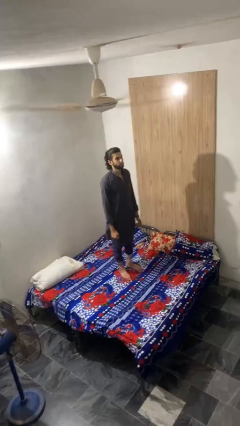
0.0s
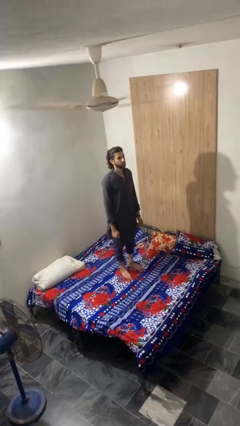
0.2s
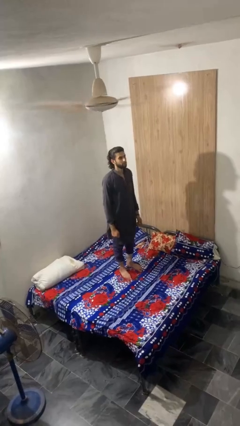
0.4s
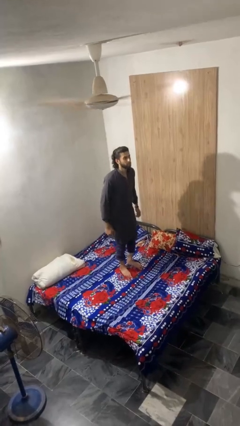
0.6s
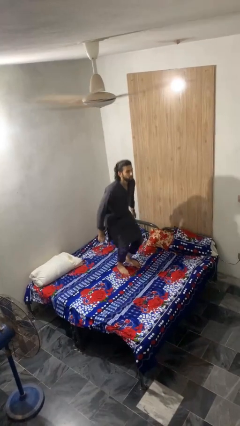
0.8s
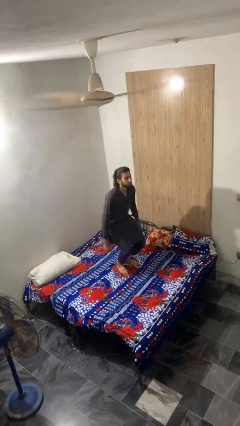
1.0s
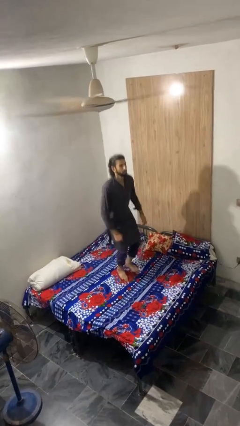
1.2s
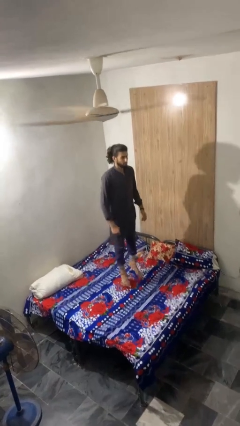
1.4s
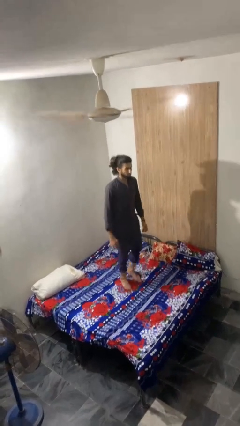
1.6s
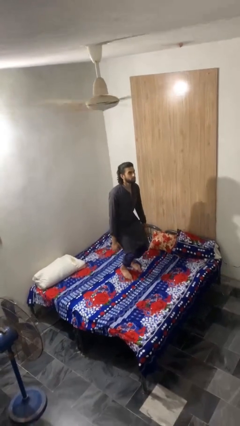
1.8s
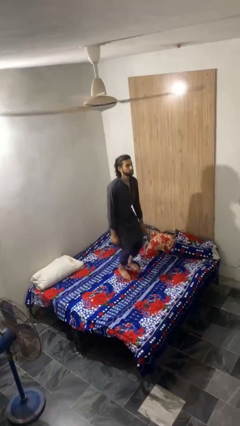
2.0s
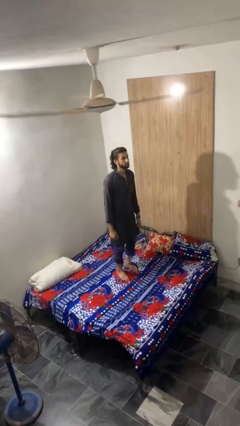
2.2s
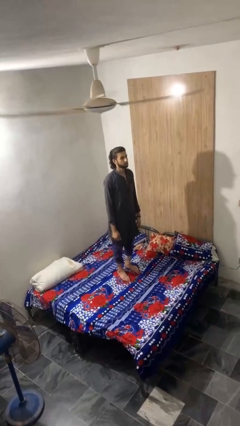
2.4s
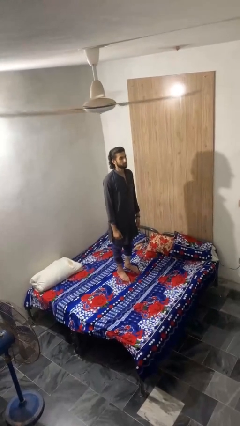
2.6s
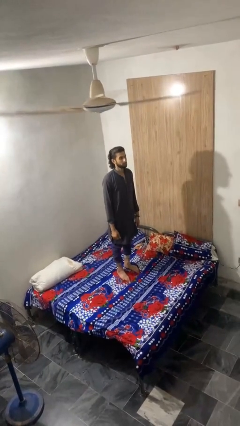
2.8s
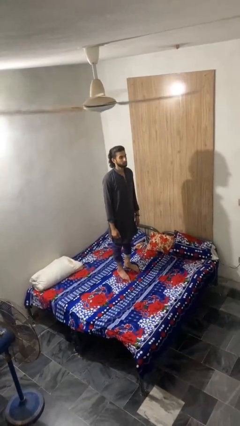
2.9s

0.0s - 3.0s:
person jumps on bed

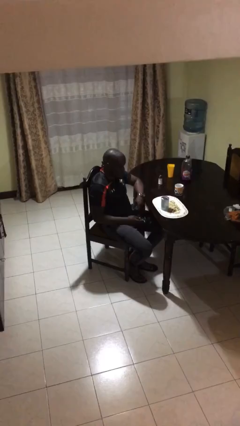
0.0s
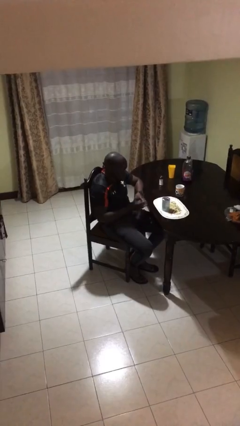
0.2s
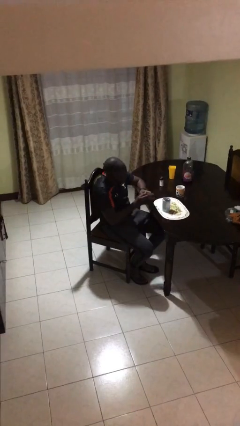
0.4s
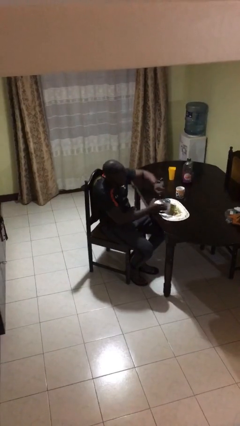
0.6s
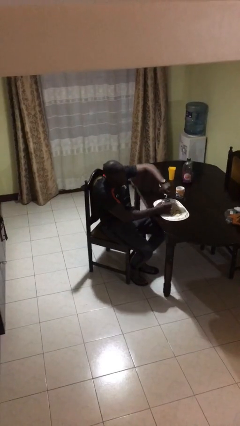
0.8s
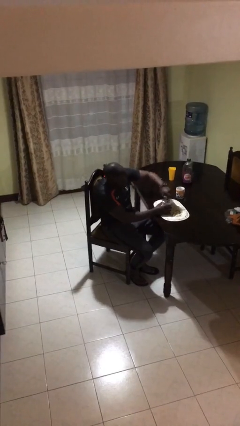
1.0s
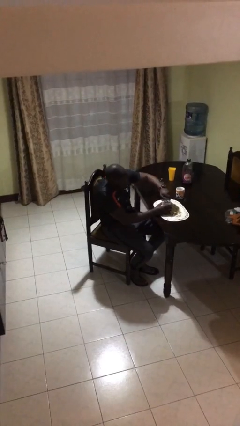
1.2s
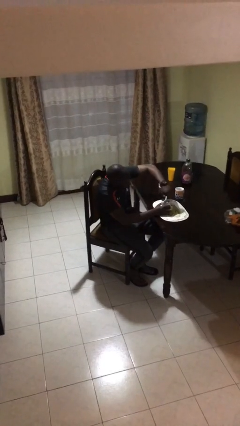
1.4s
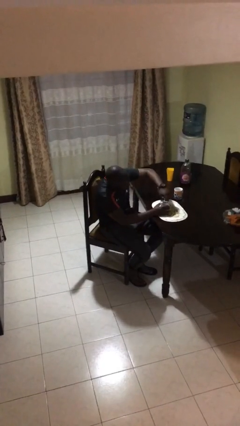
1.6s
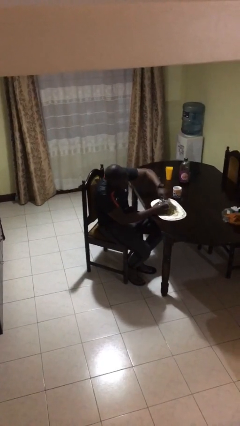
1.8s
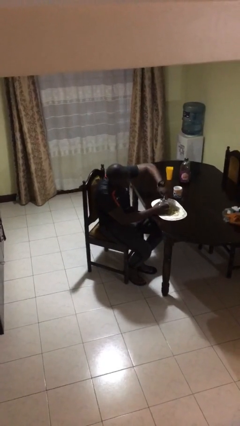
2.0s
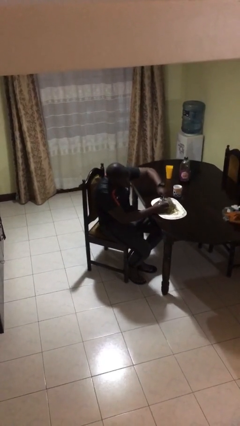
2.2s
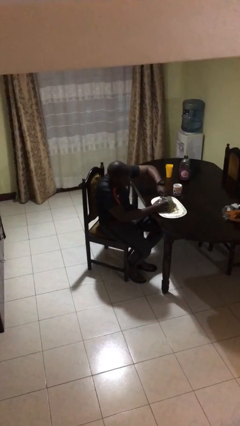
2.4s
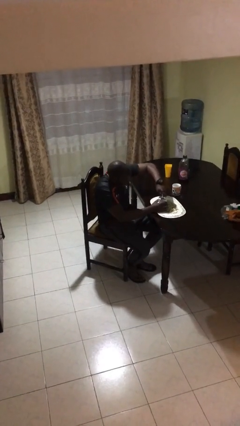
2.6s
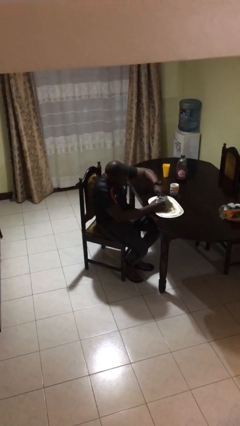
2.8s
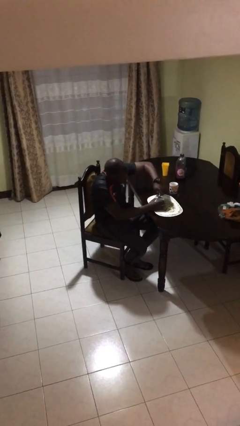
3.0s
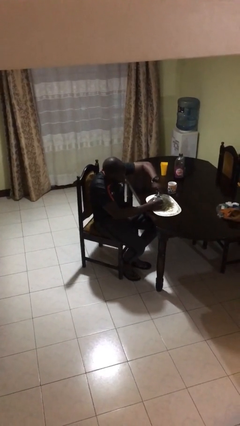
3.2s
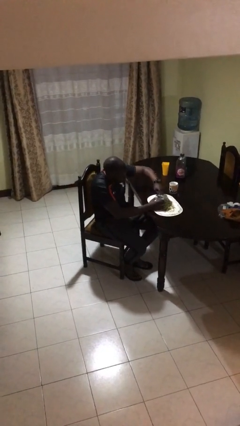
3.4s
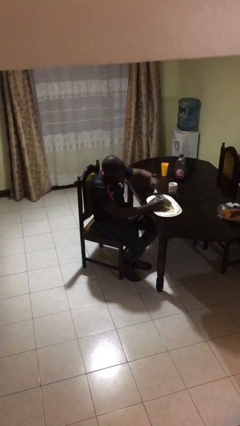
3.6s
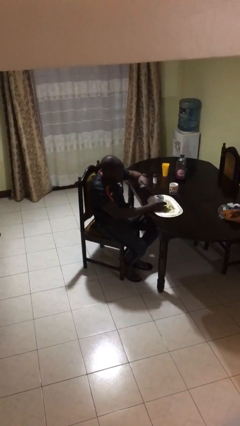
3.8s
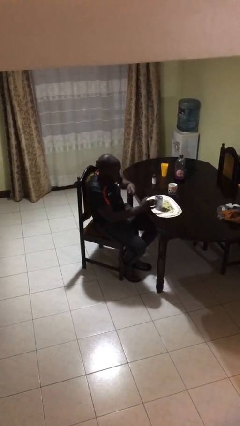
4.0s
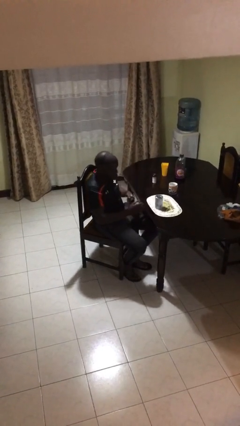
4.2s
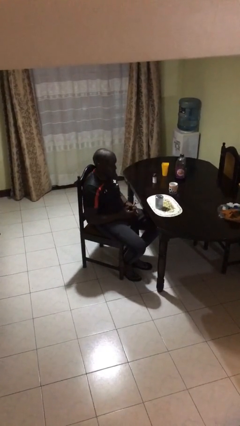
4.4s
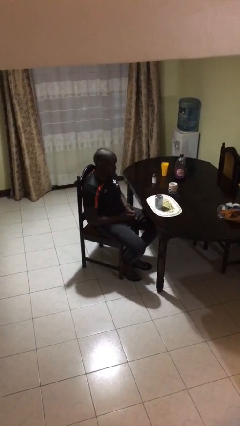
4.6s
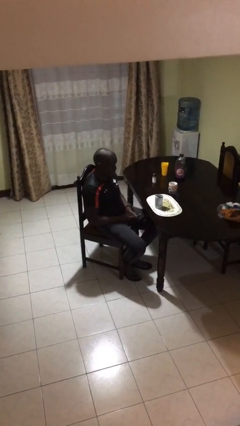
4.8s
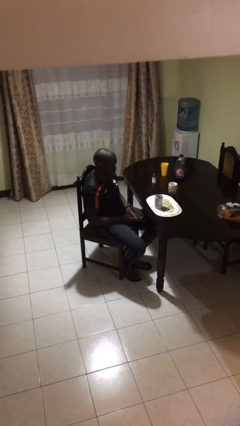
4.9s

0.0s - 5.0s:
person opens can with can opener

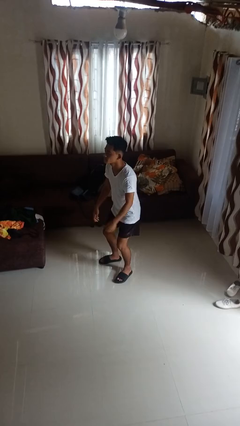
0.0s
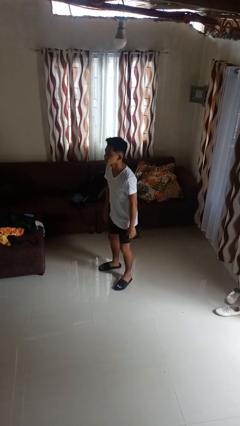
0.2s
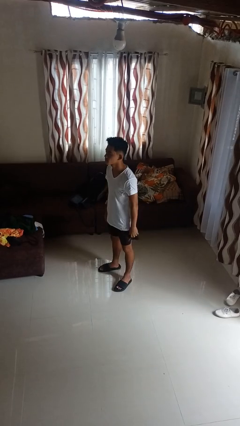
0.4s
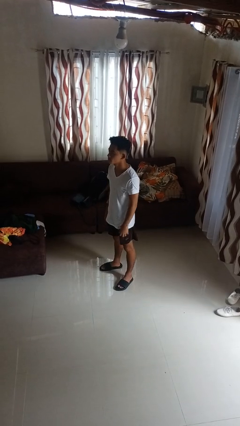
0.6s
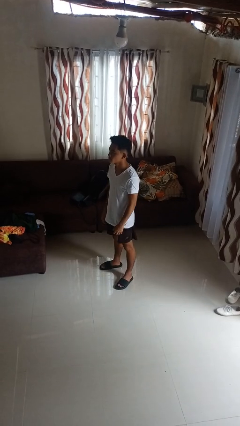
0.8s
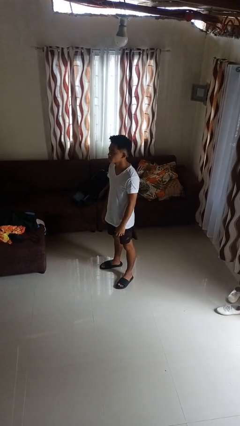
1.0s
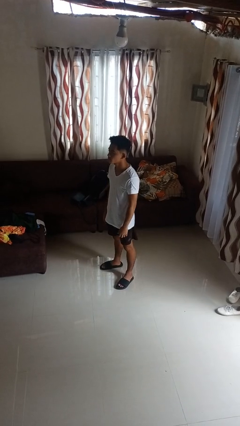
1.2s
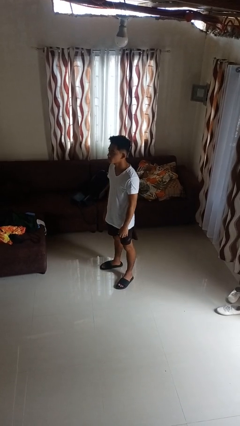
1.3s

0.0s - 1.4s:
person stands up

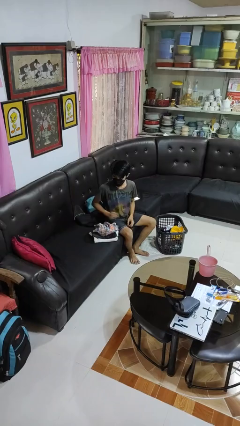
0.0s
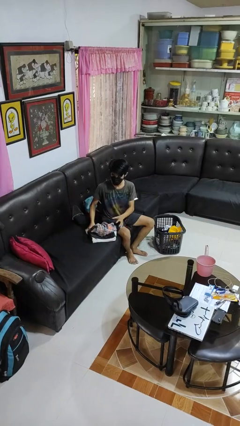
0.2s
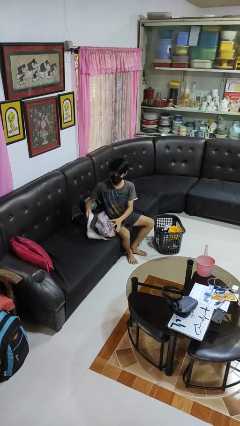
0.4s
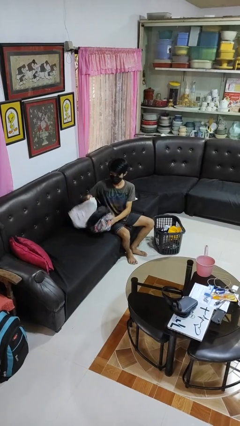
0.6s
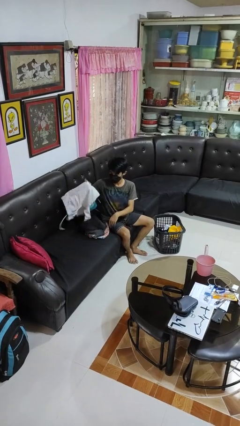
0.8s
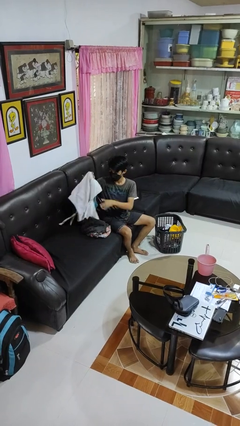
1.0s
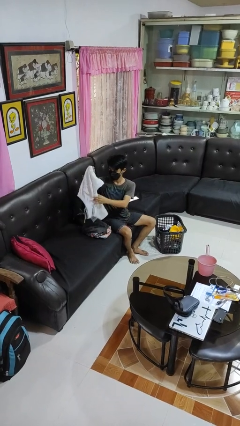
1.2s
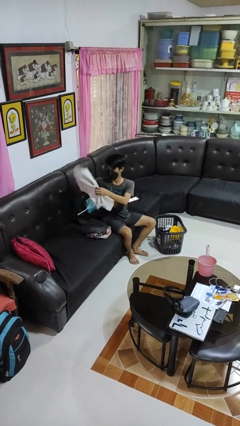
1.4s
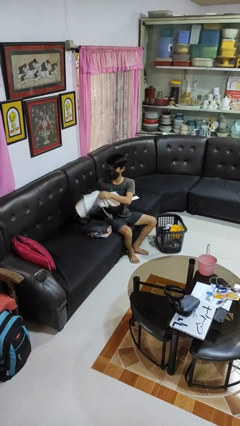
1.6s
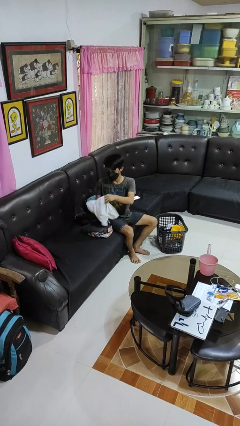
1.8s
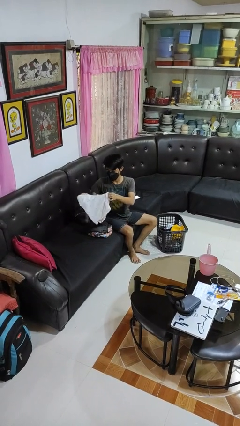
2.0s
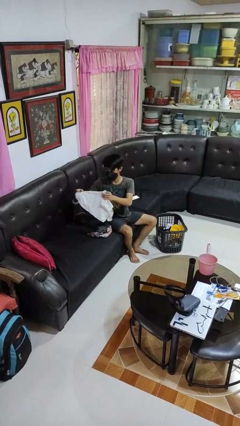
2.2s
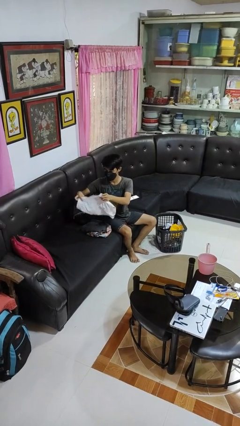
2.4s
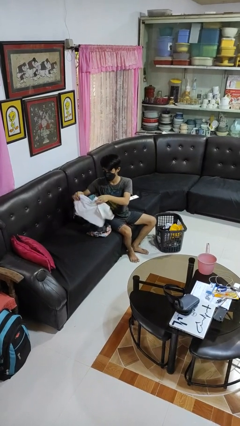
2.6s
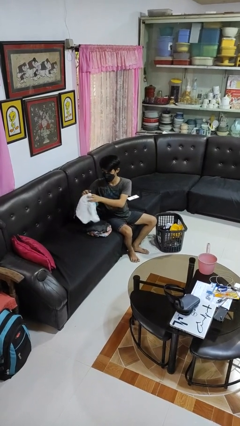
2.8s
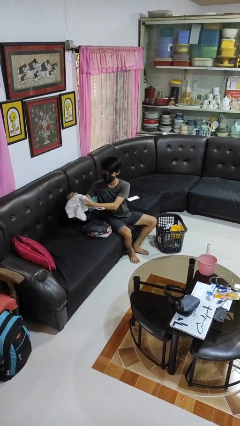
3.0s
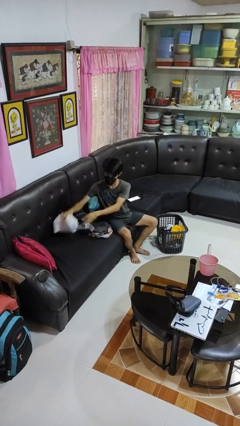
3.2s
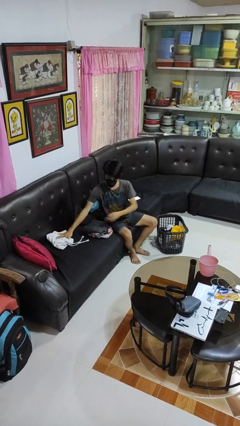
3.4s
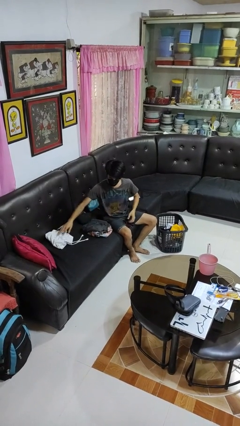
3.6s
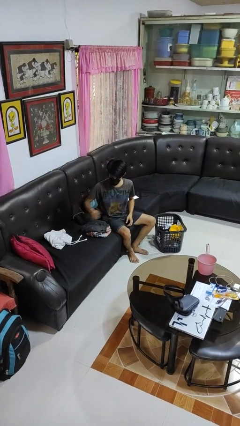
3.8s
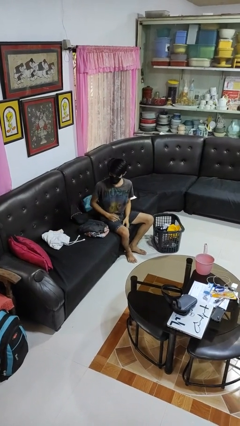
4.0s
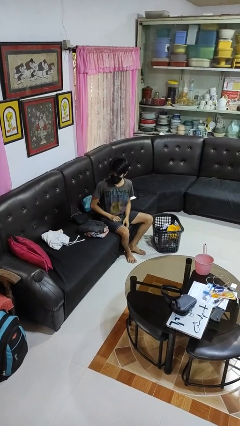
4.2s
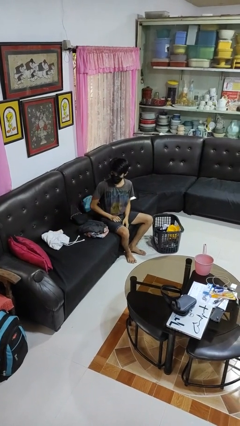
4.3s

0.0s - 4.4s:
person folds pants

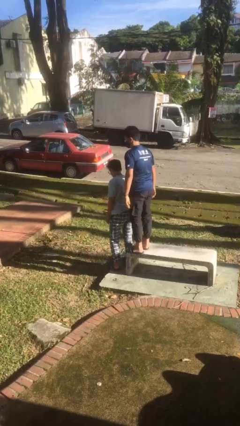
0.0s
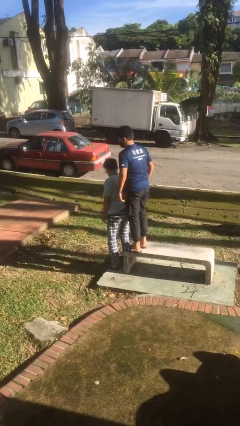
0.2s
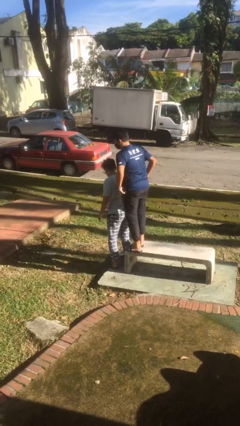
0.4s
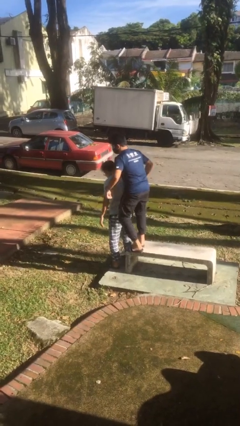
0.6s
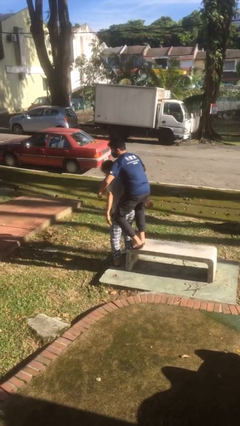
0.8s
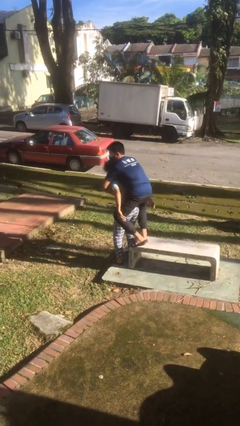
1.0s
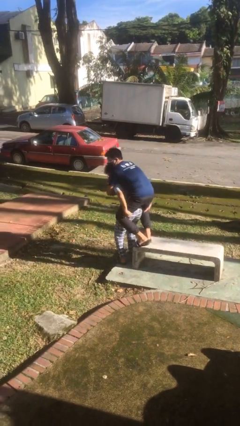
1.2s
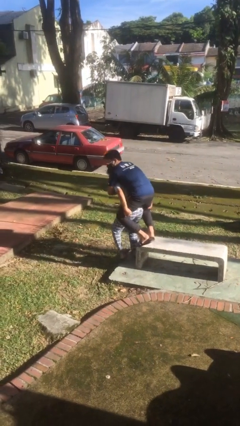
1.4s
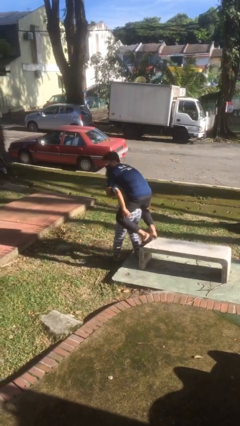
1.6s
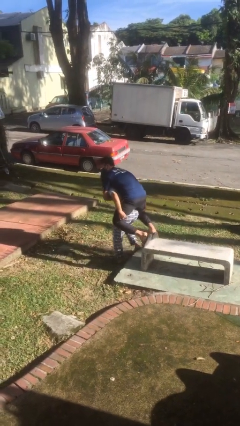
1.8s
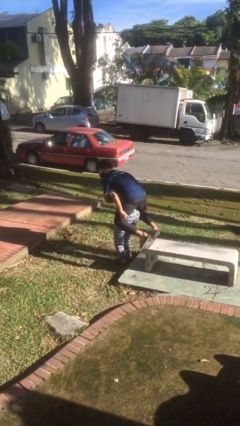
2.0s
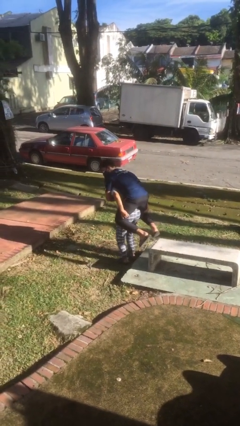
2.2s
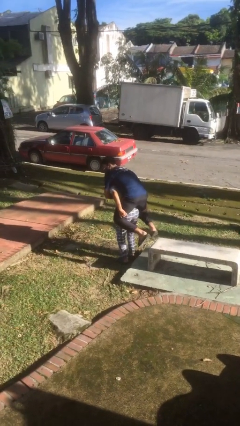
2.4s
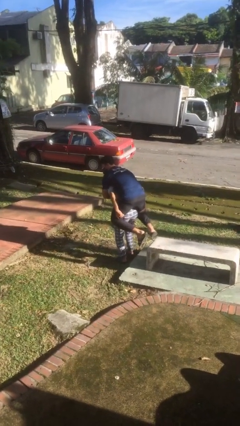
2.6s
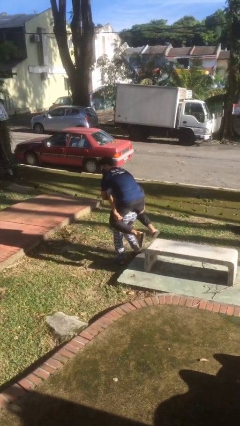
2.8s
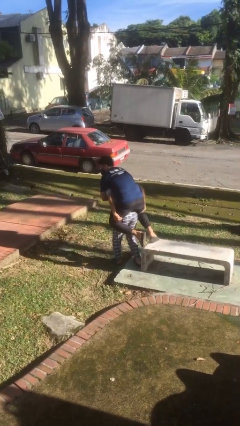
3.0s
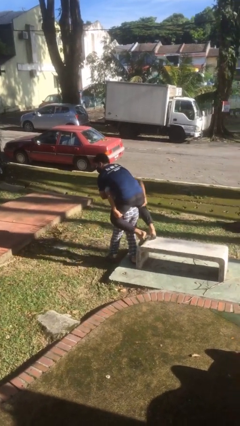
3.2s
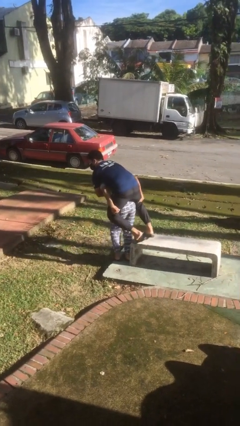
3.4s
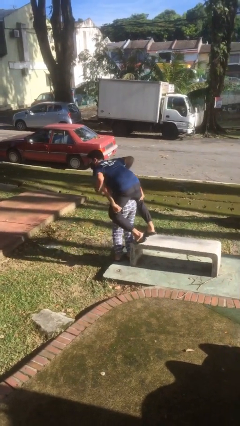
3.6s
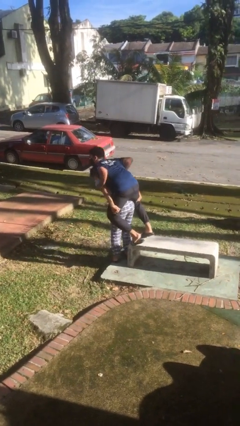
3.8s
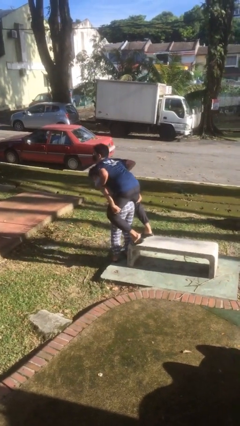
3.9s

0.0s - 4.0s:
person carries person on shoulders
